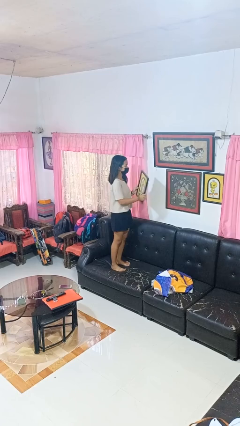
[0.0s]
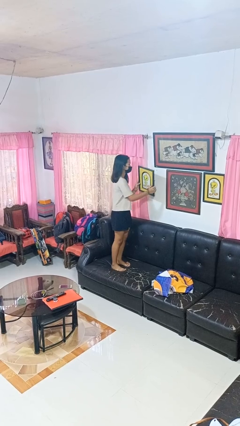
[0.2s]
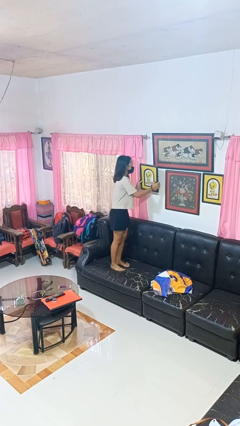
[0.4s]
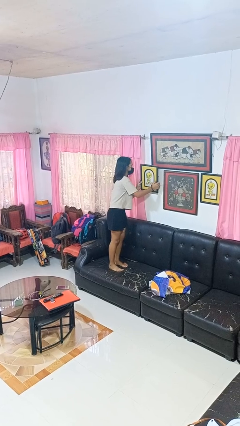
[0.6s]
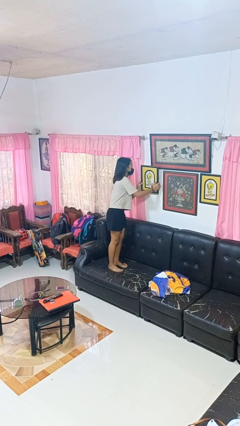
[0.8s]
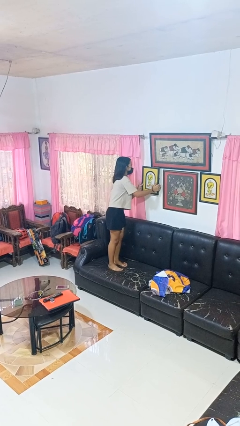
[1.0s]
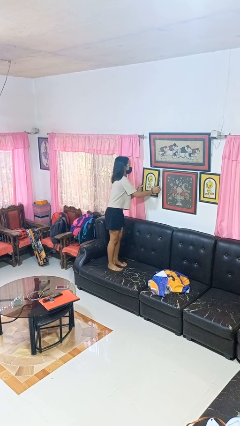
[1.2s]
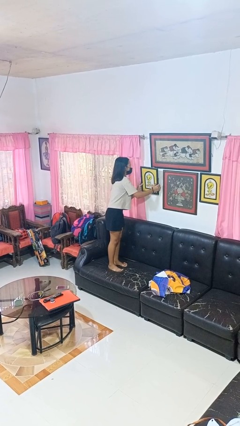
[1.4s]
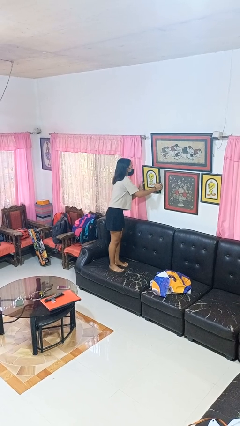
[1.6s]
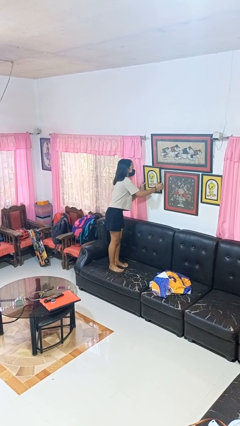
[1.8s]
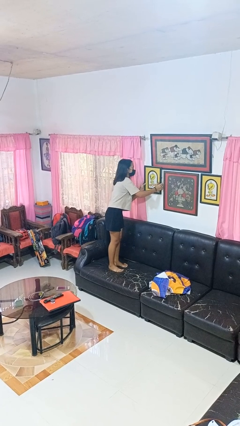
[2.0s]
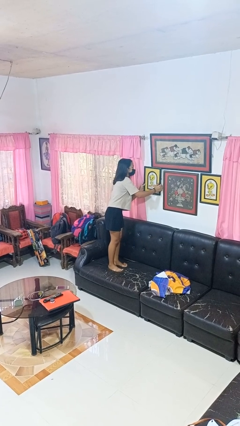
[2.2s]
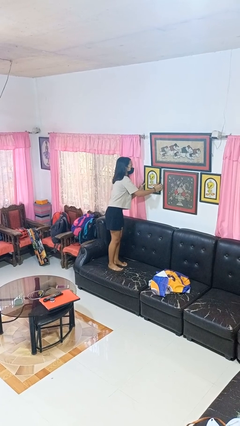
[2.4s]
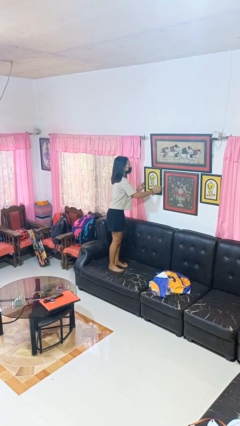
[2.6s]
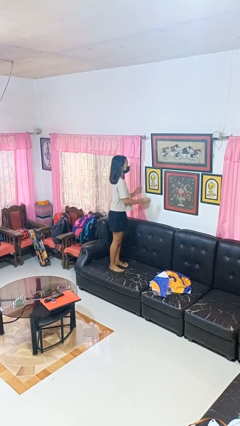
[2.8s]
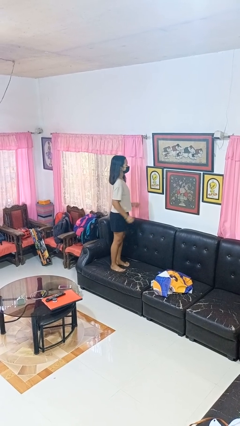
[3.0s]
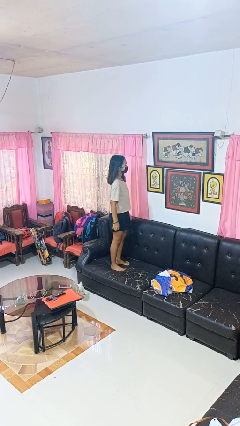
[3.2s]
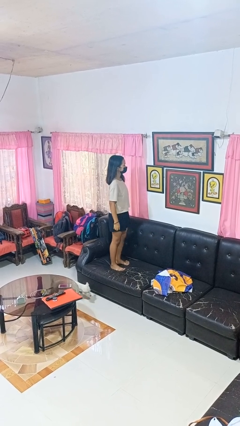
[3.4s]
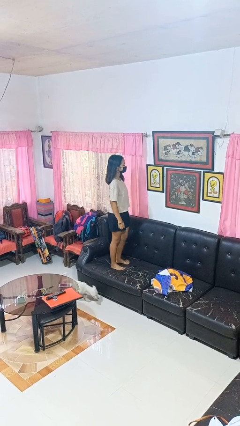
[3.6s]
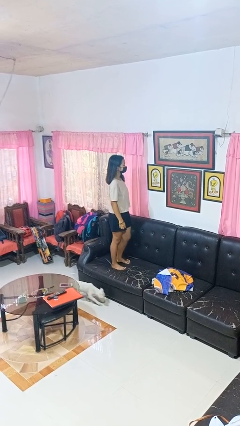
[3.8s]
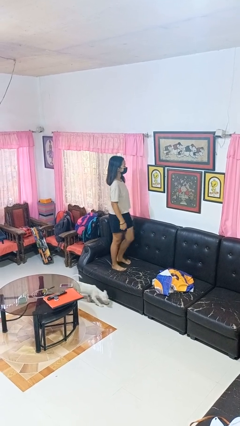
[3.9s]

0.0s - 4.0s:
person puts up picture frame

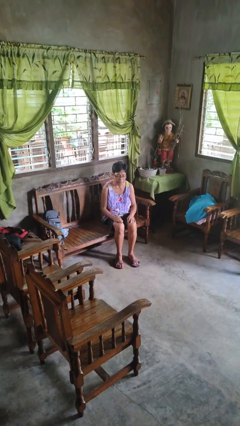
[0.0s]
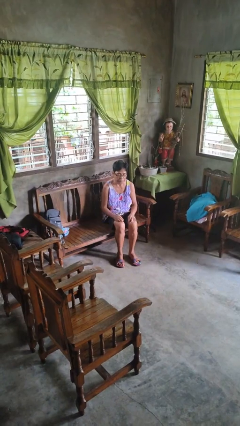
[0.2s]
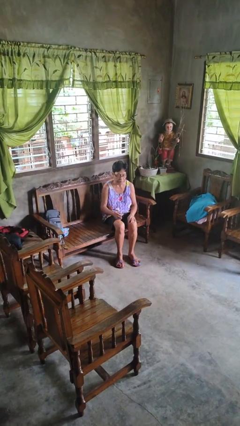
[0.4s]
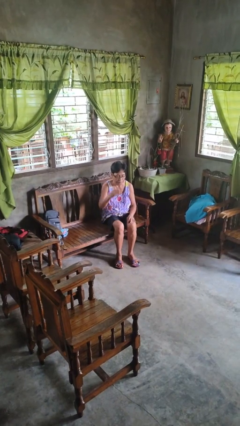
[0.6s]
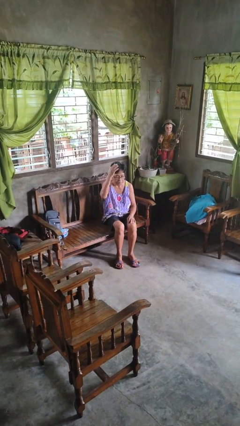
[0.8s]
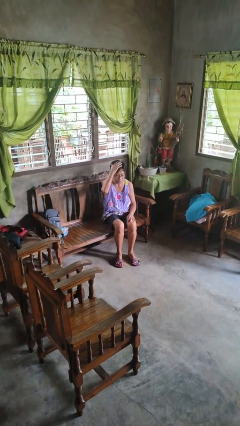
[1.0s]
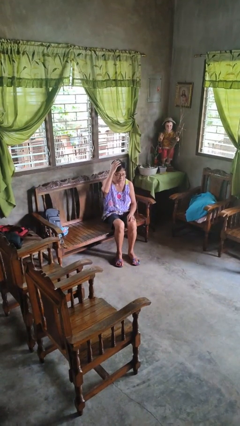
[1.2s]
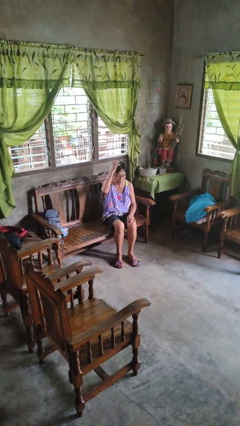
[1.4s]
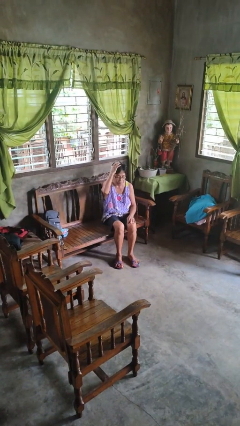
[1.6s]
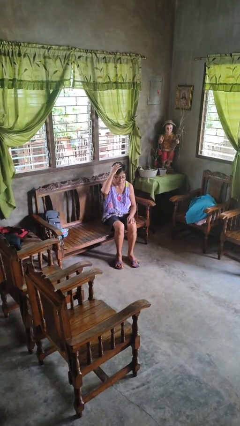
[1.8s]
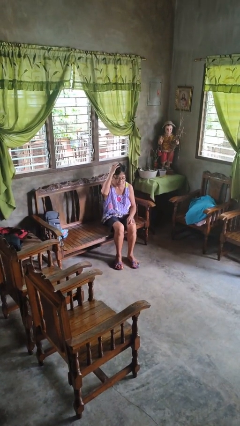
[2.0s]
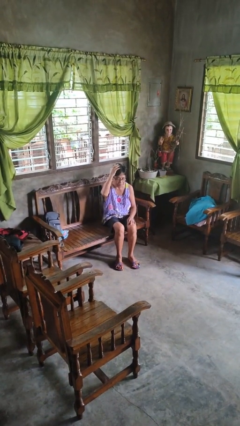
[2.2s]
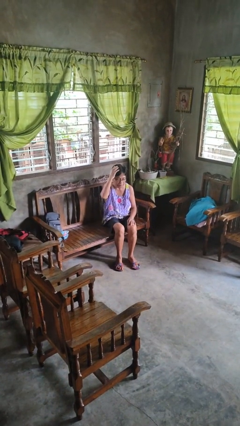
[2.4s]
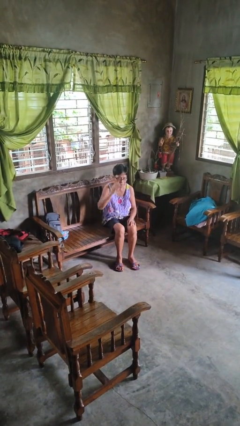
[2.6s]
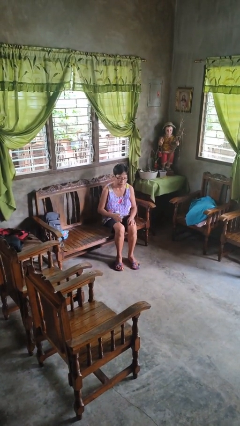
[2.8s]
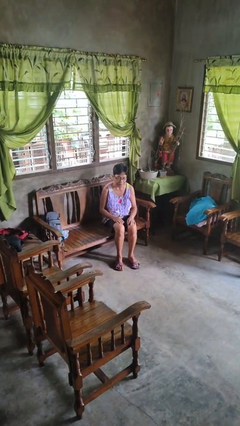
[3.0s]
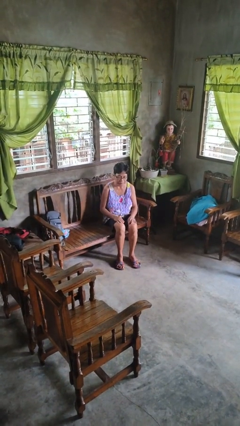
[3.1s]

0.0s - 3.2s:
person pats head

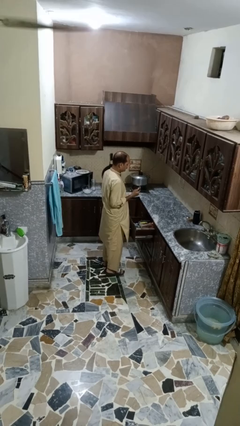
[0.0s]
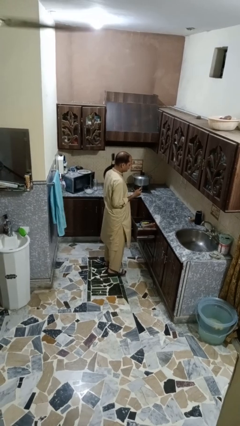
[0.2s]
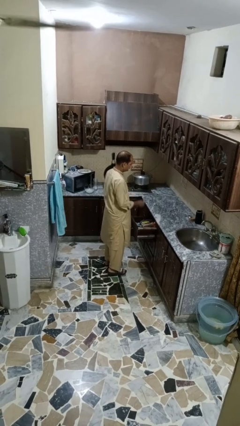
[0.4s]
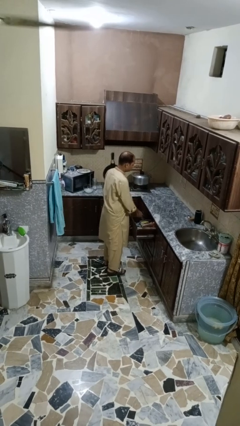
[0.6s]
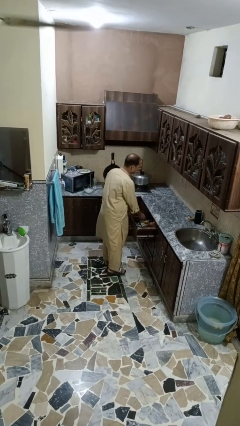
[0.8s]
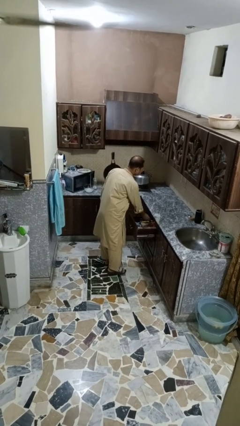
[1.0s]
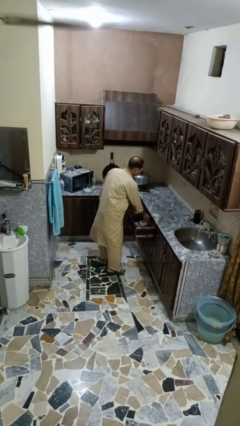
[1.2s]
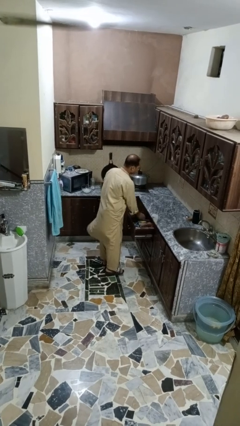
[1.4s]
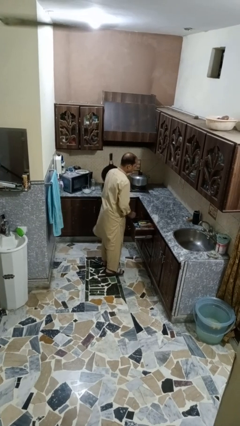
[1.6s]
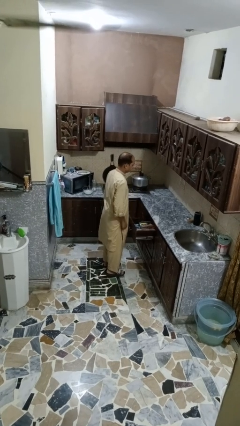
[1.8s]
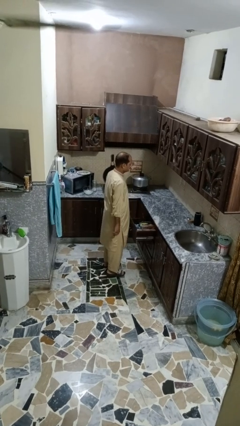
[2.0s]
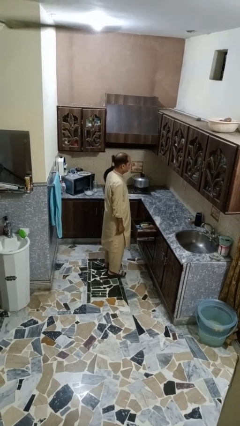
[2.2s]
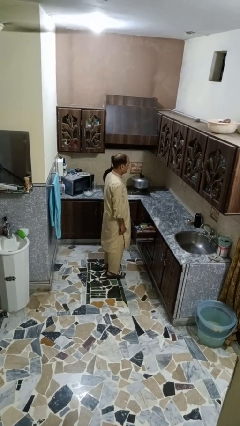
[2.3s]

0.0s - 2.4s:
person puts object into kitchen drawer

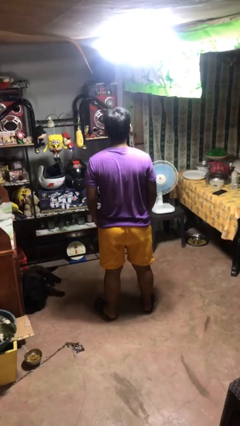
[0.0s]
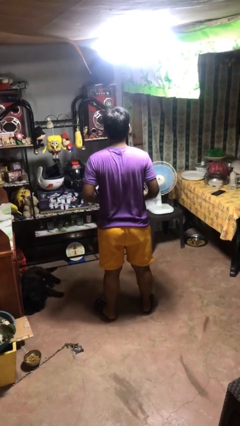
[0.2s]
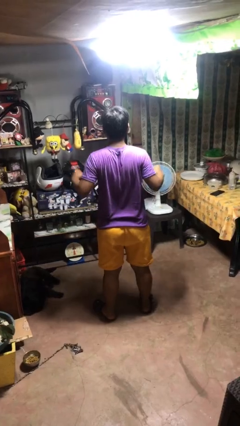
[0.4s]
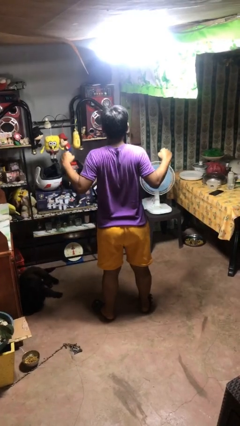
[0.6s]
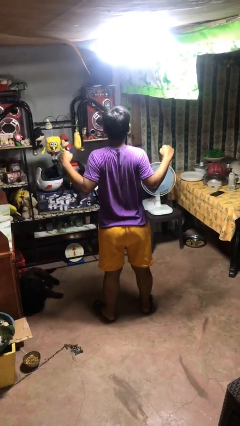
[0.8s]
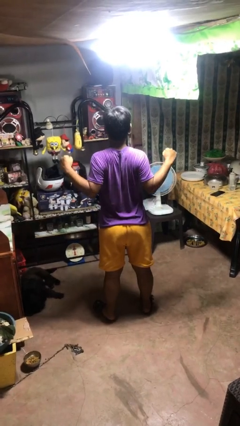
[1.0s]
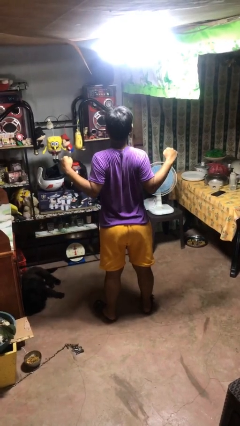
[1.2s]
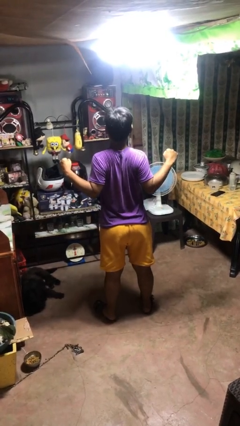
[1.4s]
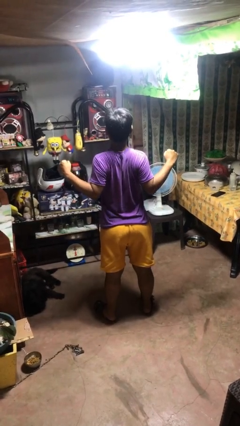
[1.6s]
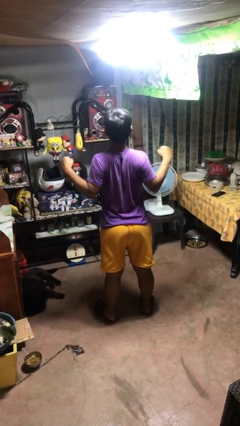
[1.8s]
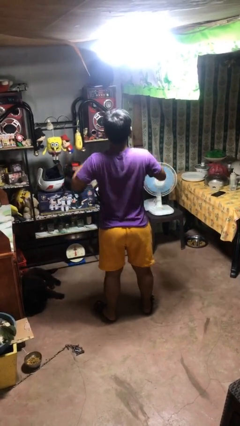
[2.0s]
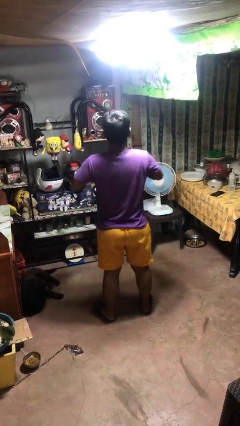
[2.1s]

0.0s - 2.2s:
person stretches back

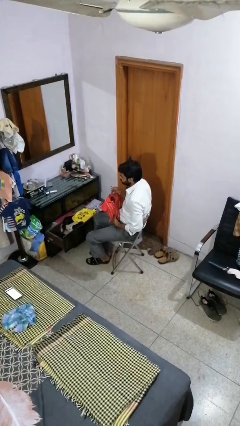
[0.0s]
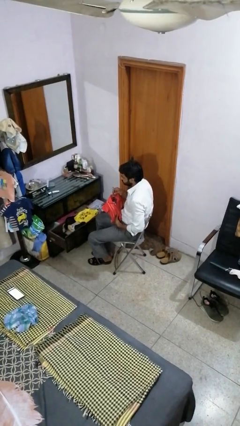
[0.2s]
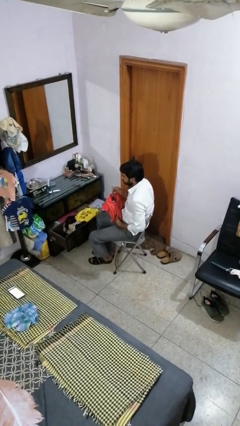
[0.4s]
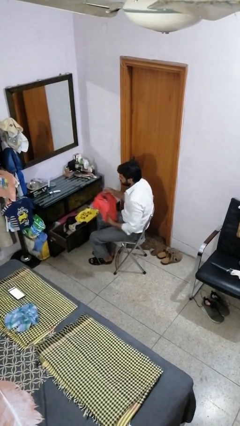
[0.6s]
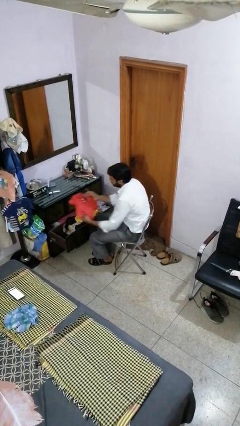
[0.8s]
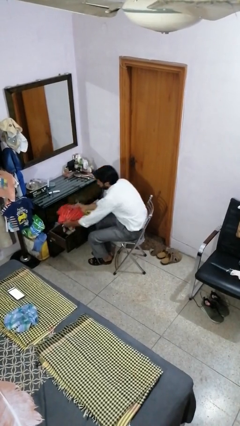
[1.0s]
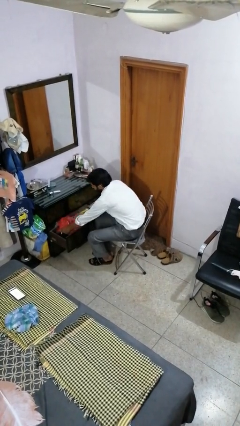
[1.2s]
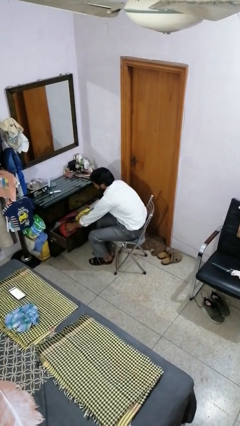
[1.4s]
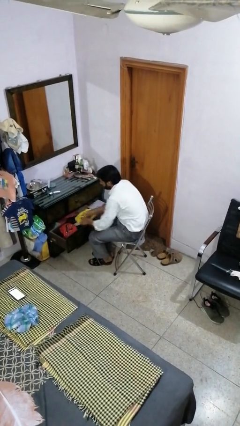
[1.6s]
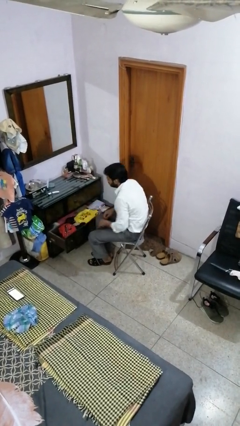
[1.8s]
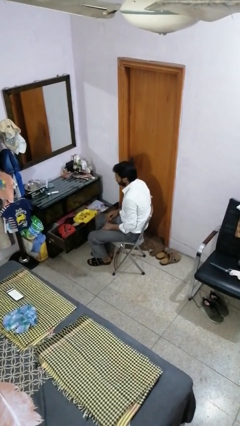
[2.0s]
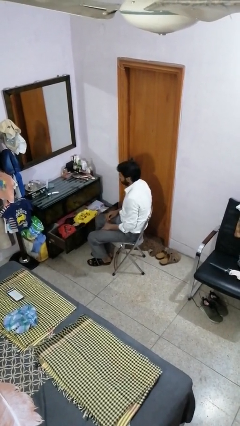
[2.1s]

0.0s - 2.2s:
person puts clothes into dresser

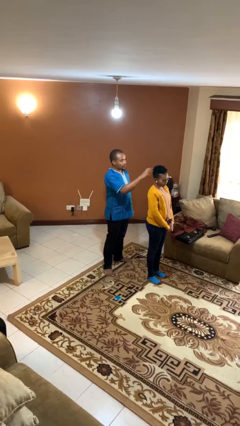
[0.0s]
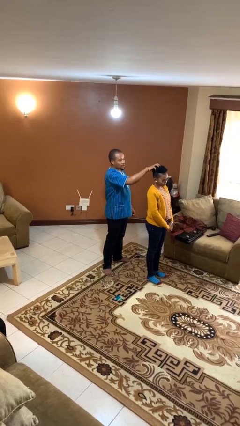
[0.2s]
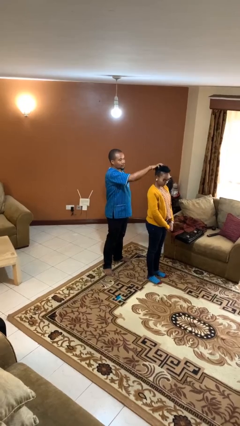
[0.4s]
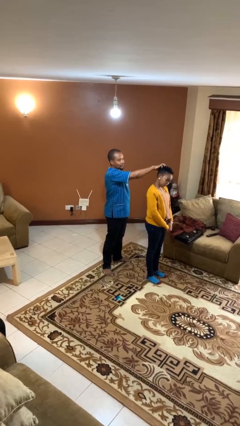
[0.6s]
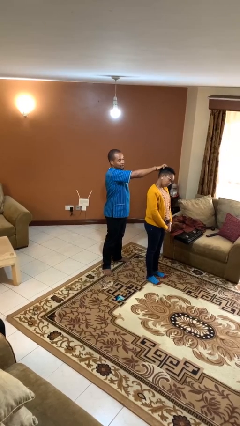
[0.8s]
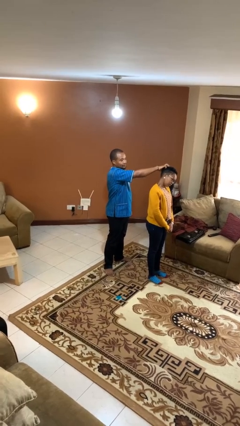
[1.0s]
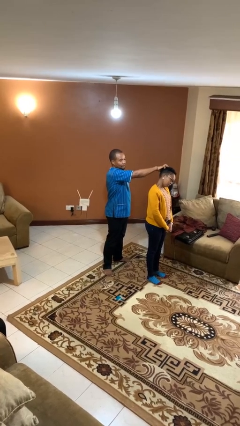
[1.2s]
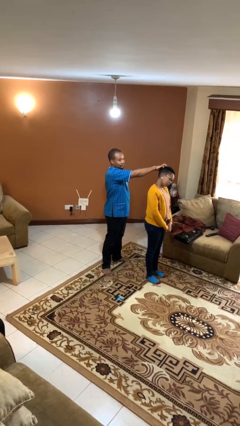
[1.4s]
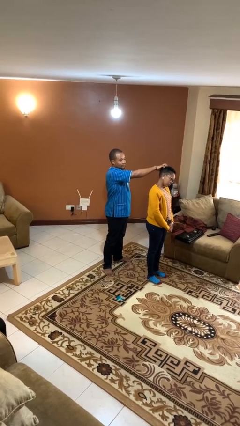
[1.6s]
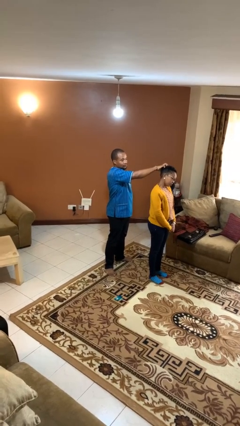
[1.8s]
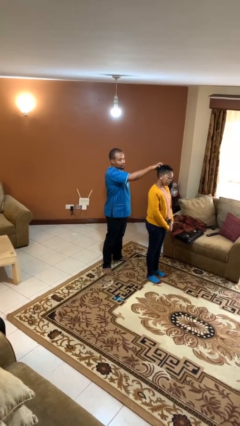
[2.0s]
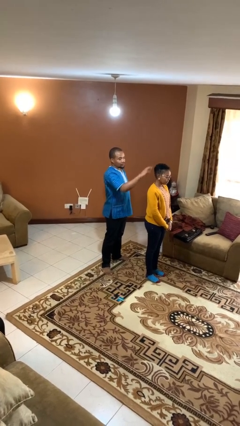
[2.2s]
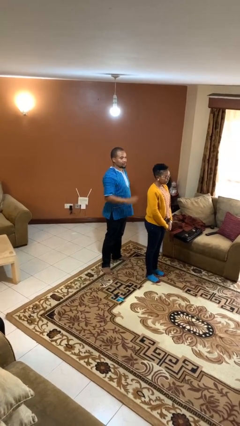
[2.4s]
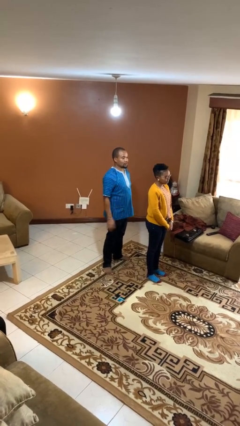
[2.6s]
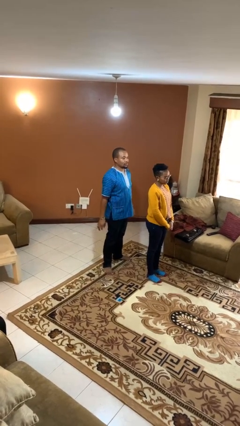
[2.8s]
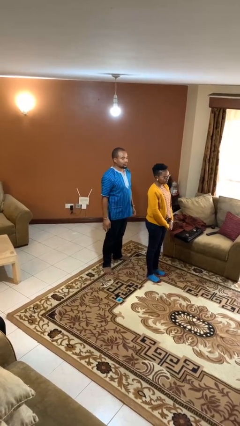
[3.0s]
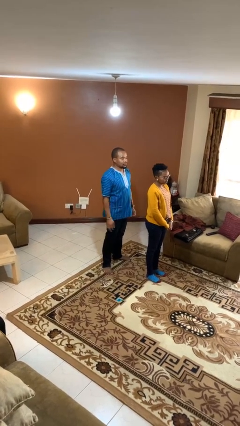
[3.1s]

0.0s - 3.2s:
person grabs person by hair

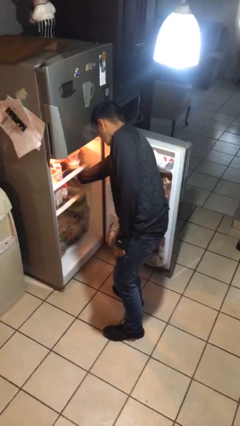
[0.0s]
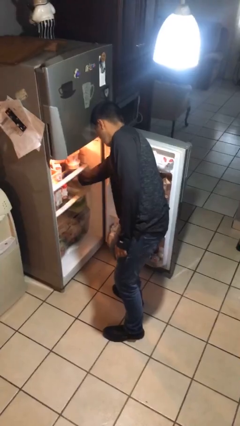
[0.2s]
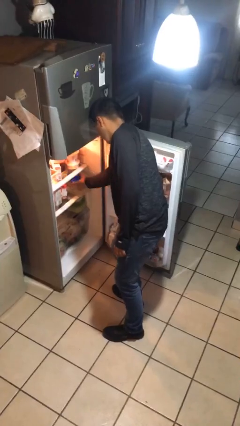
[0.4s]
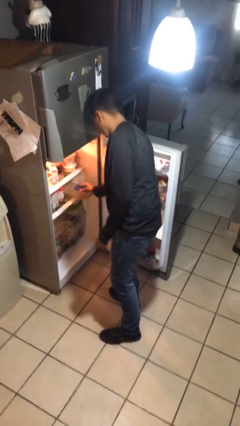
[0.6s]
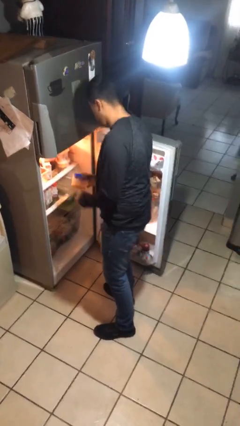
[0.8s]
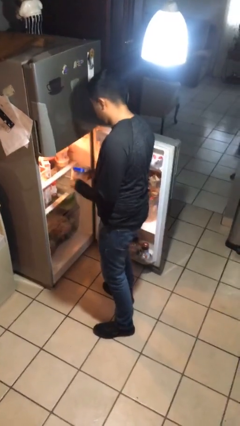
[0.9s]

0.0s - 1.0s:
person puts object into refrigerator
